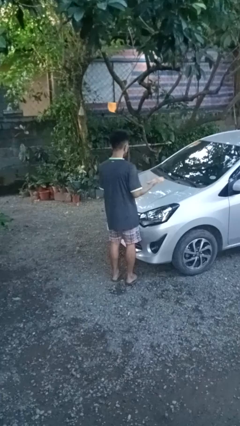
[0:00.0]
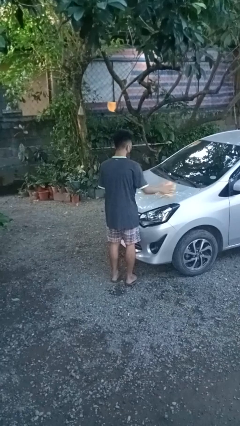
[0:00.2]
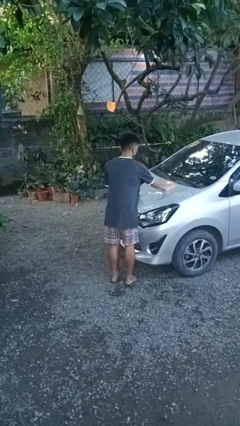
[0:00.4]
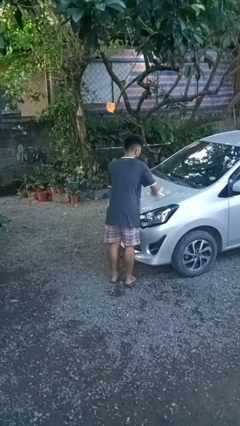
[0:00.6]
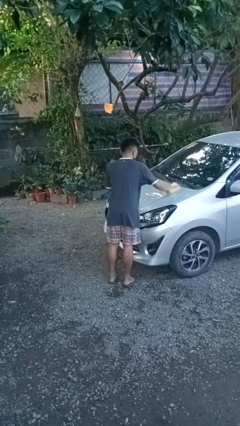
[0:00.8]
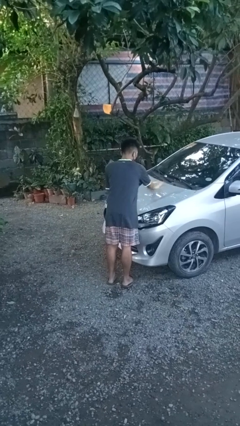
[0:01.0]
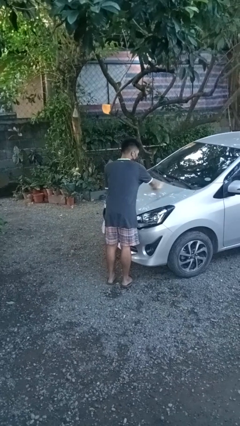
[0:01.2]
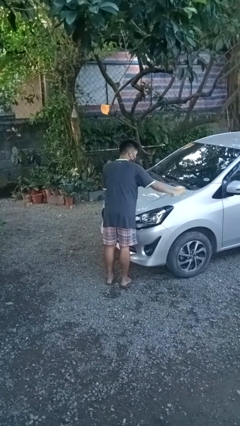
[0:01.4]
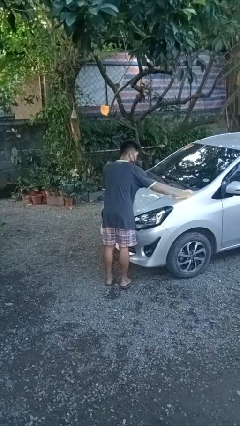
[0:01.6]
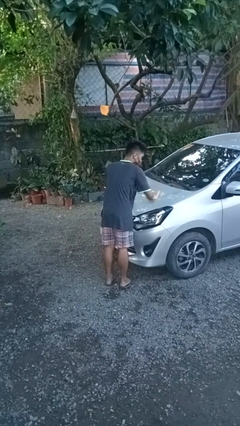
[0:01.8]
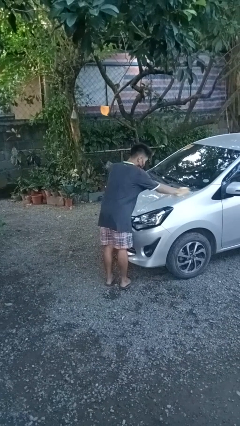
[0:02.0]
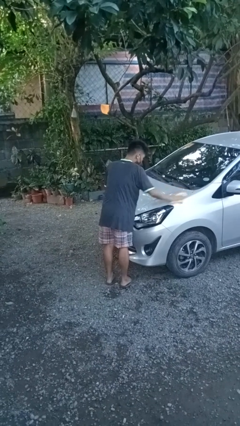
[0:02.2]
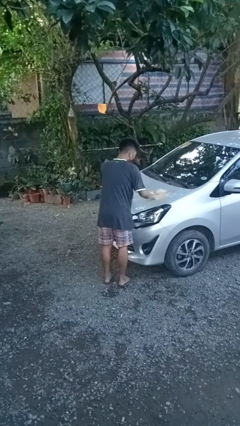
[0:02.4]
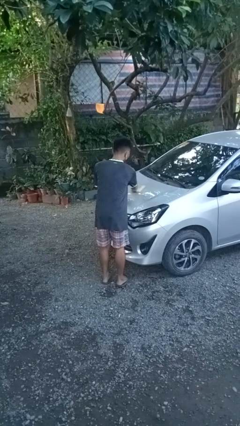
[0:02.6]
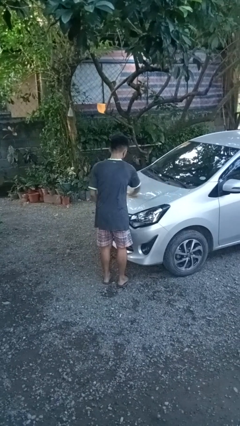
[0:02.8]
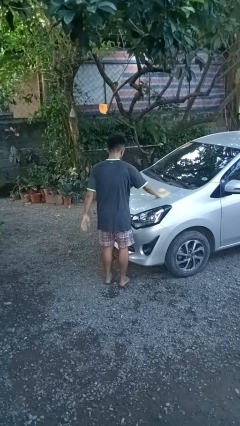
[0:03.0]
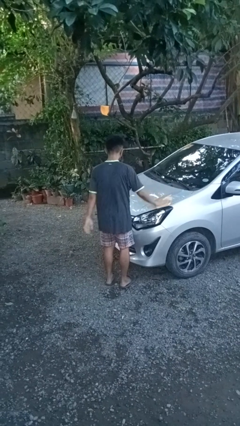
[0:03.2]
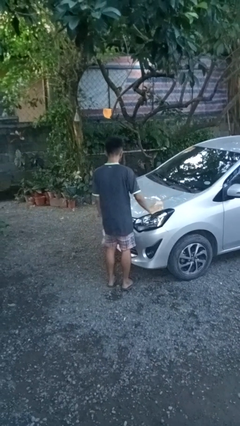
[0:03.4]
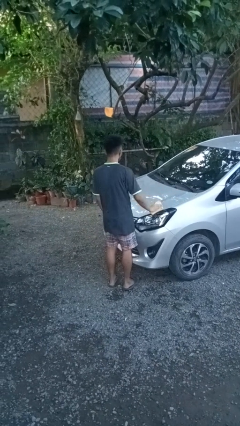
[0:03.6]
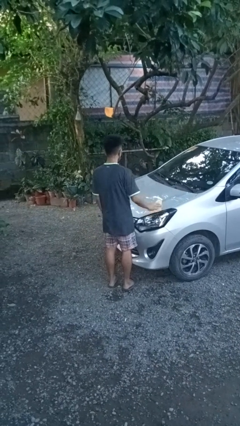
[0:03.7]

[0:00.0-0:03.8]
person polishes car with rag

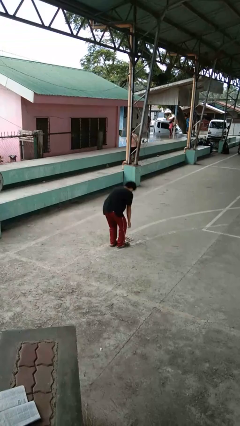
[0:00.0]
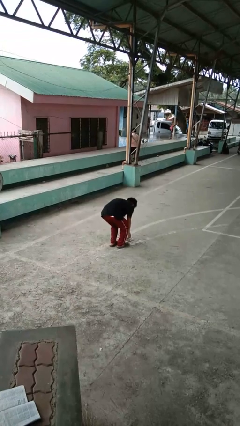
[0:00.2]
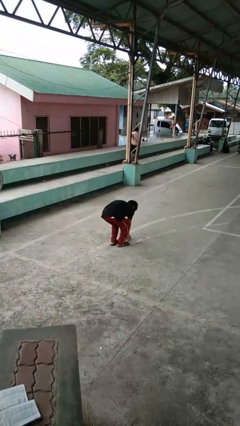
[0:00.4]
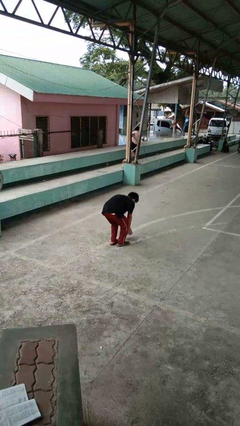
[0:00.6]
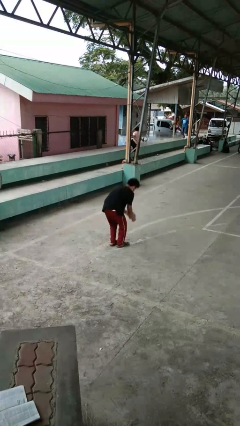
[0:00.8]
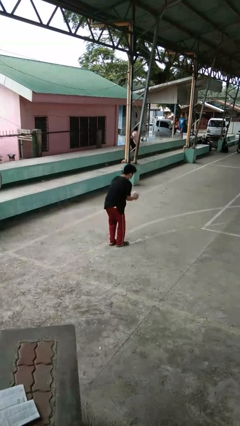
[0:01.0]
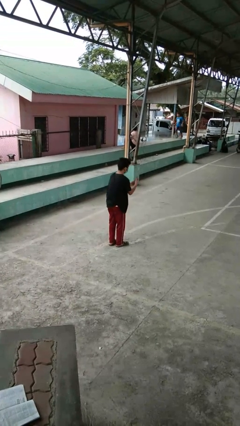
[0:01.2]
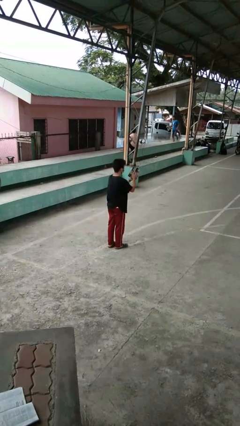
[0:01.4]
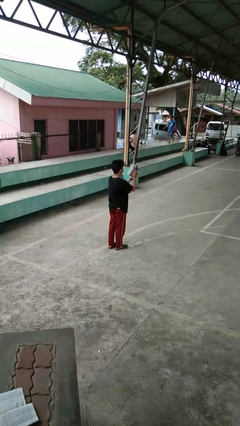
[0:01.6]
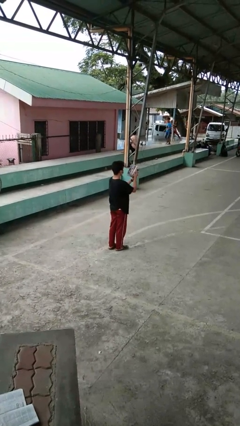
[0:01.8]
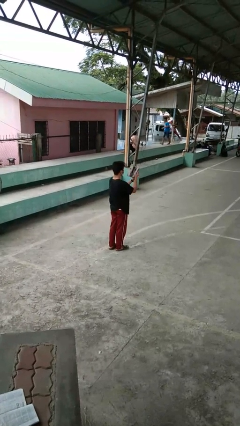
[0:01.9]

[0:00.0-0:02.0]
person picks up object from floor

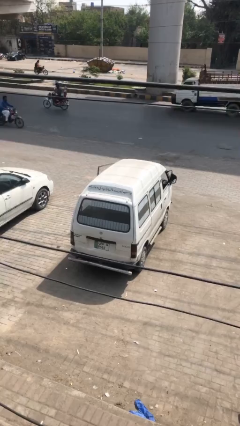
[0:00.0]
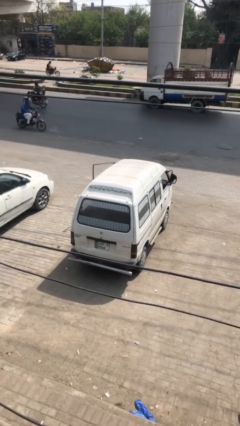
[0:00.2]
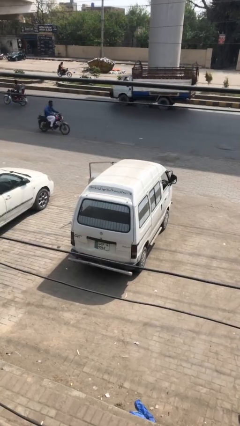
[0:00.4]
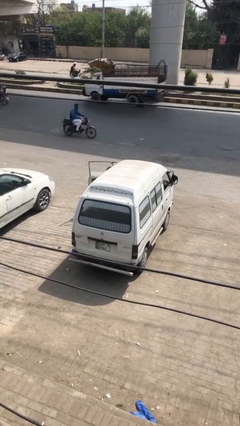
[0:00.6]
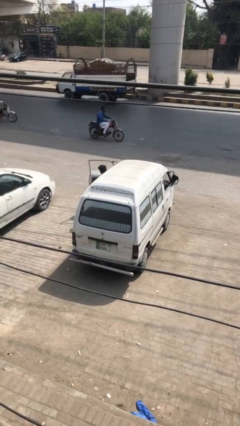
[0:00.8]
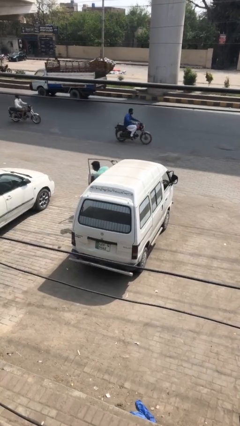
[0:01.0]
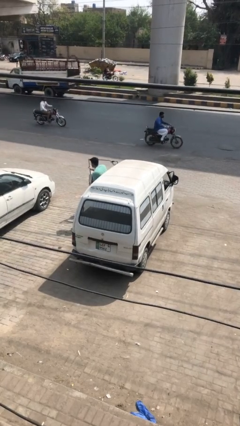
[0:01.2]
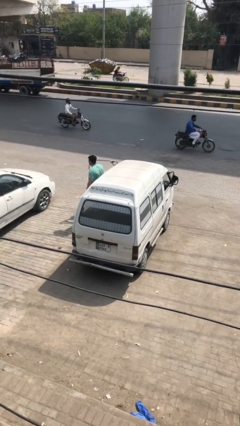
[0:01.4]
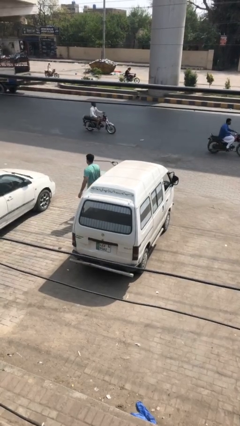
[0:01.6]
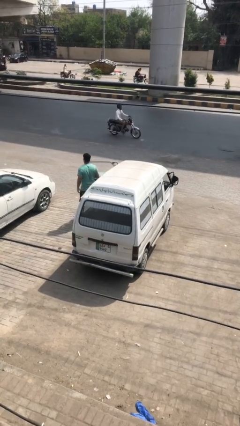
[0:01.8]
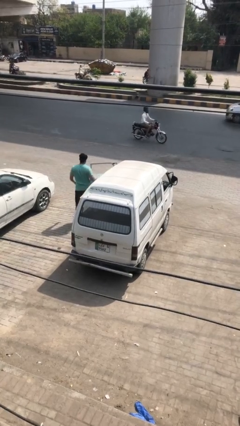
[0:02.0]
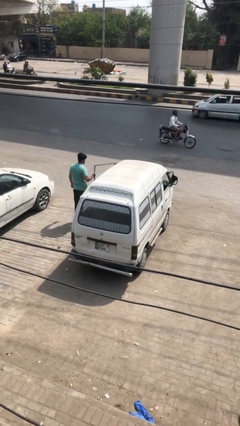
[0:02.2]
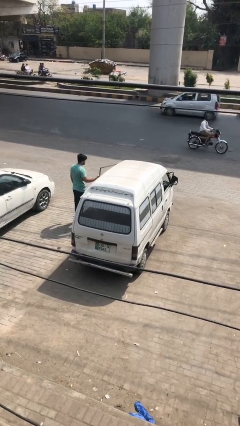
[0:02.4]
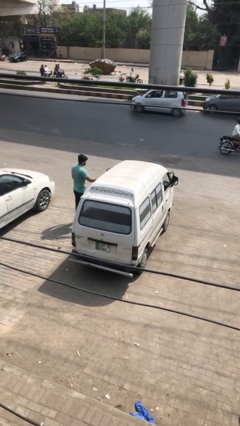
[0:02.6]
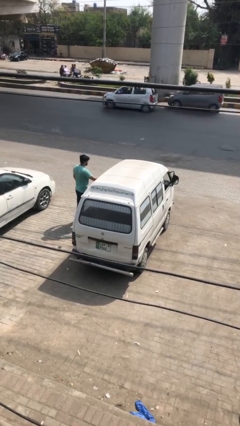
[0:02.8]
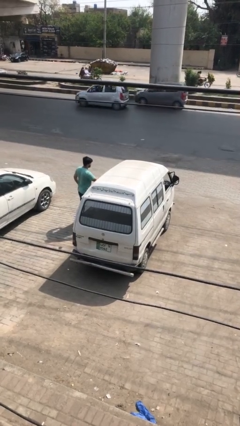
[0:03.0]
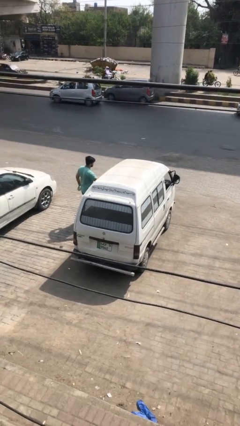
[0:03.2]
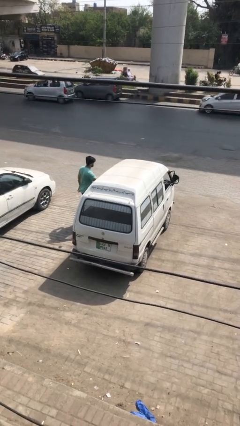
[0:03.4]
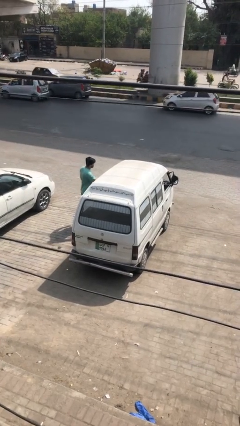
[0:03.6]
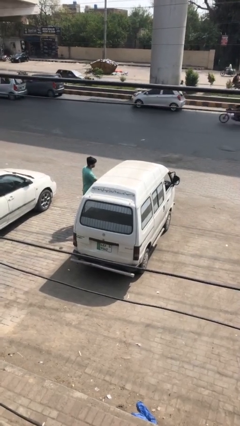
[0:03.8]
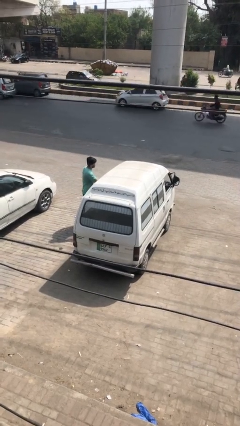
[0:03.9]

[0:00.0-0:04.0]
car drops off person

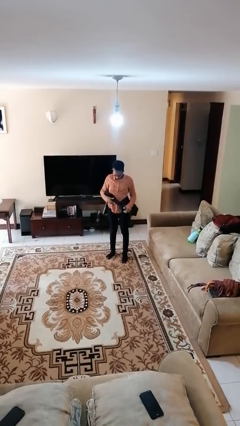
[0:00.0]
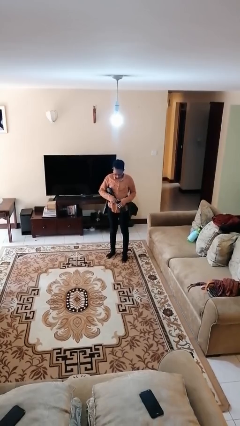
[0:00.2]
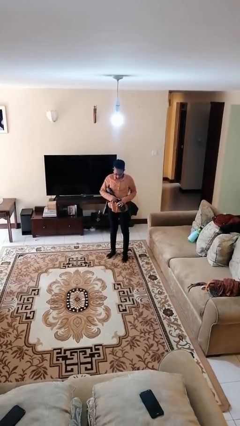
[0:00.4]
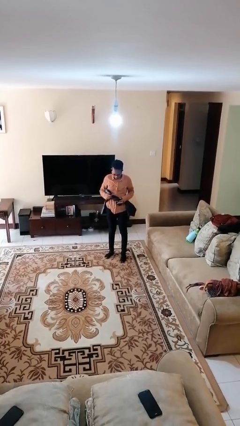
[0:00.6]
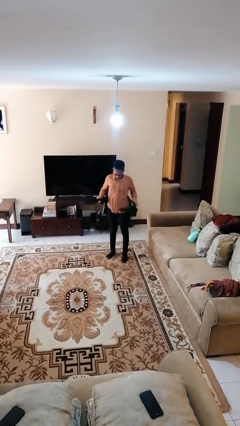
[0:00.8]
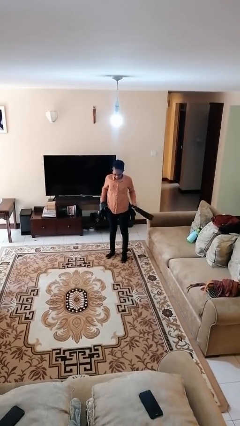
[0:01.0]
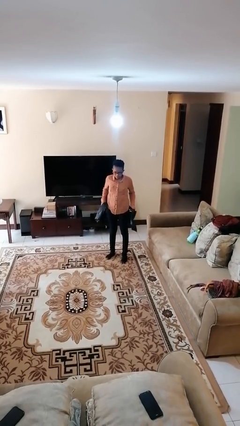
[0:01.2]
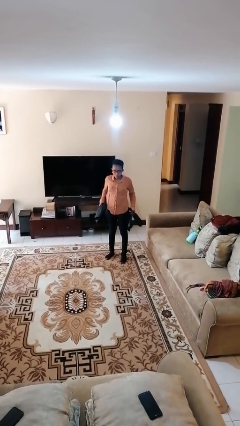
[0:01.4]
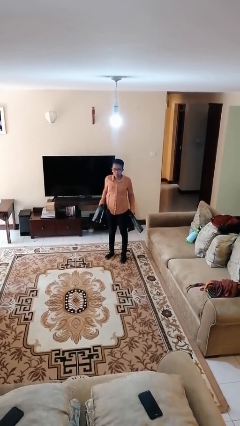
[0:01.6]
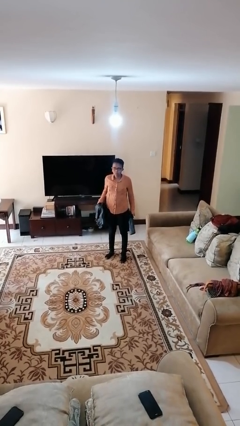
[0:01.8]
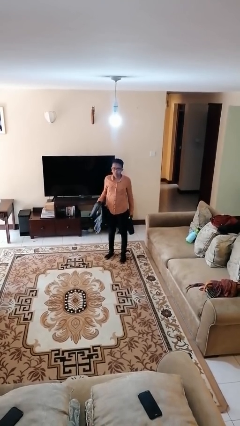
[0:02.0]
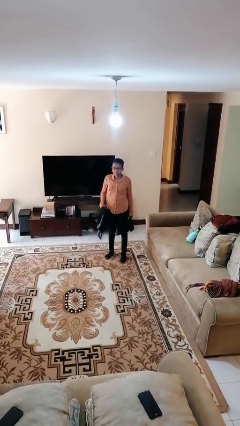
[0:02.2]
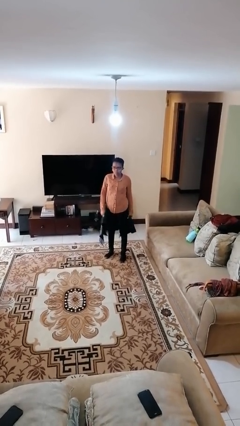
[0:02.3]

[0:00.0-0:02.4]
person unties jacket around waist

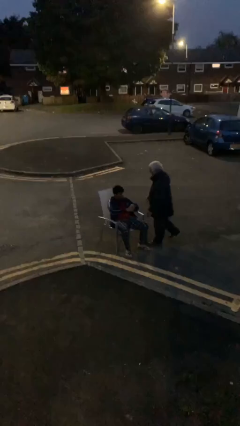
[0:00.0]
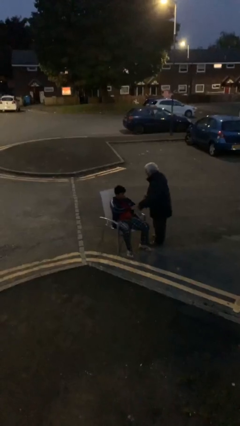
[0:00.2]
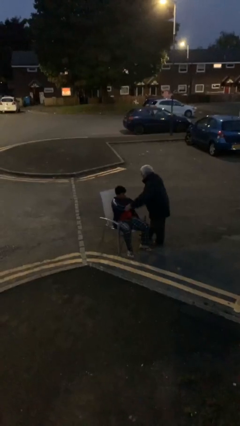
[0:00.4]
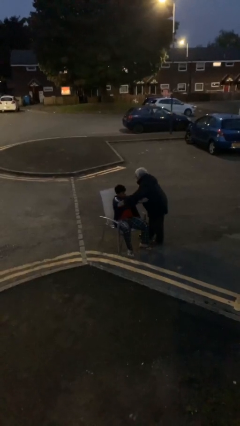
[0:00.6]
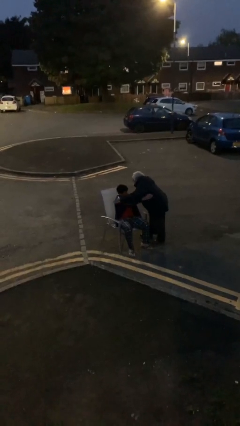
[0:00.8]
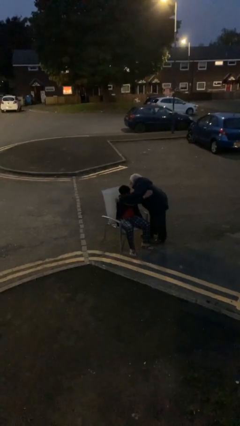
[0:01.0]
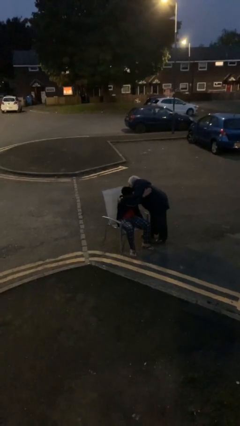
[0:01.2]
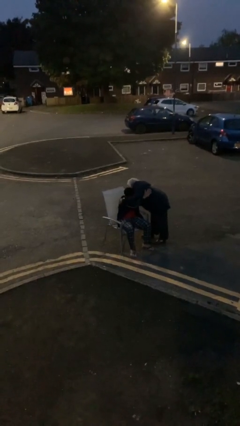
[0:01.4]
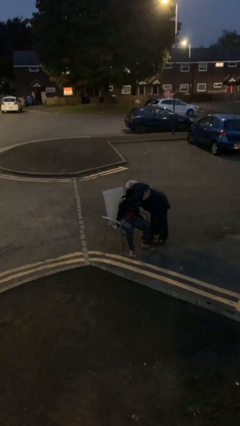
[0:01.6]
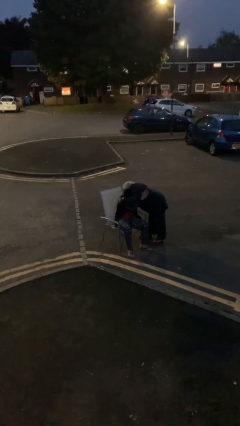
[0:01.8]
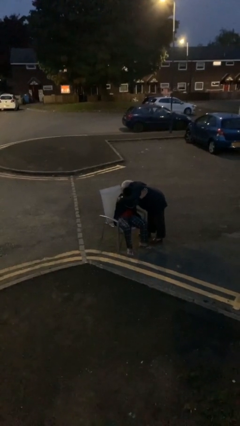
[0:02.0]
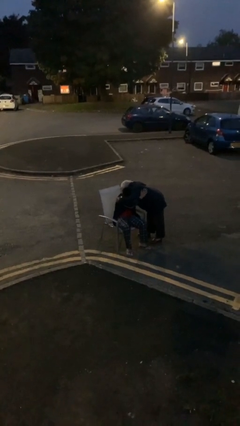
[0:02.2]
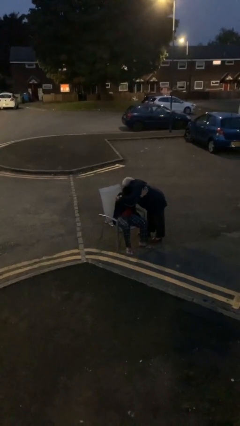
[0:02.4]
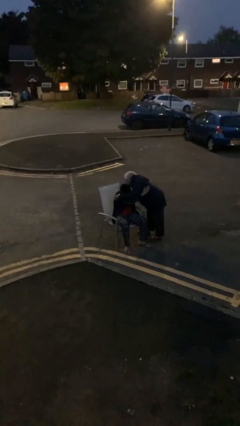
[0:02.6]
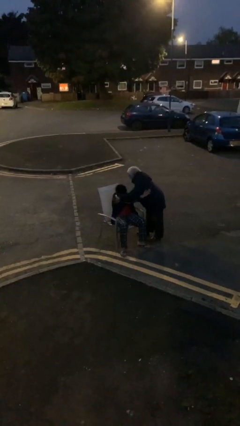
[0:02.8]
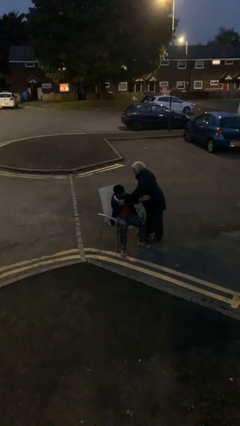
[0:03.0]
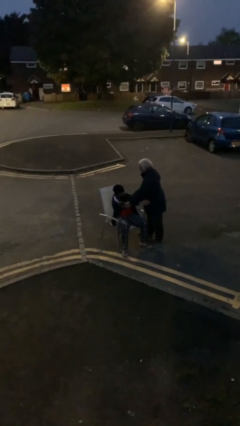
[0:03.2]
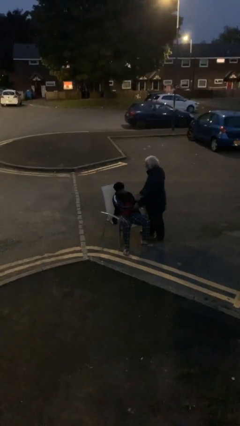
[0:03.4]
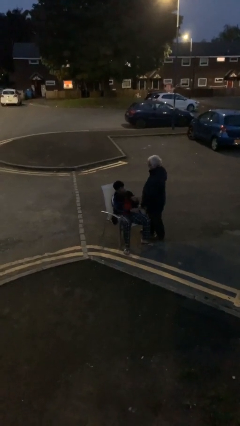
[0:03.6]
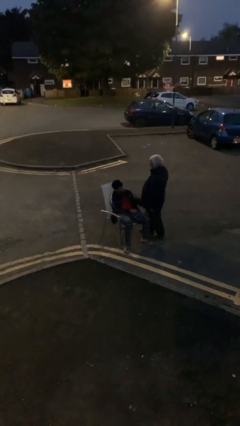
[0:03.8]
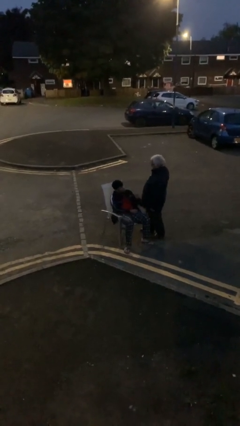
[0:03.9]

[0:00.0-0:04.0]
person embraces person

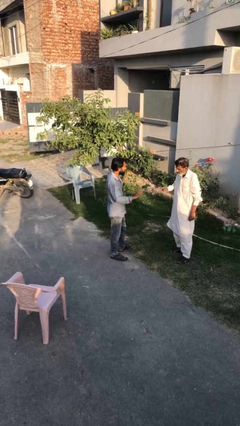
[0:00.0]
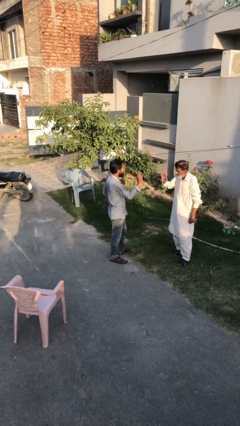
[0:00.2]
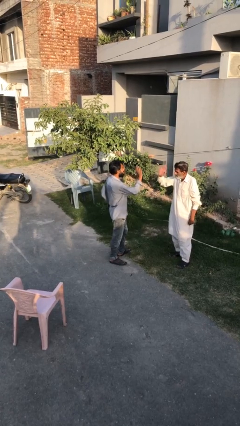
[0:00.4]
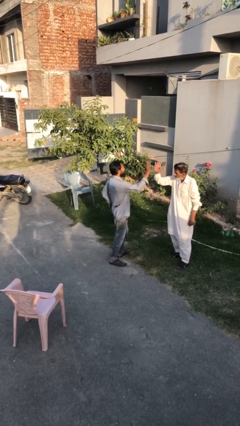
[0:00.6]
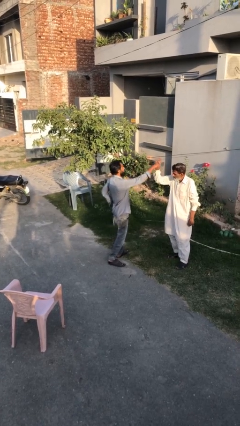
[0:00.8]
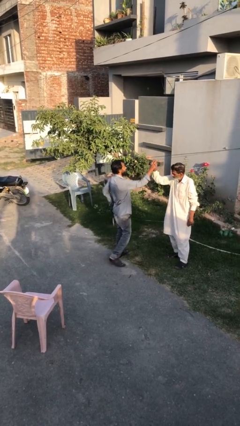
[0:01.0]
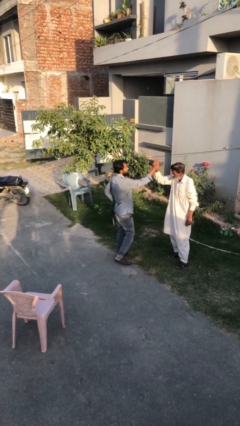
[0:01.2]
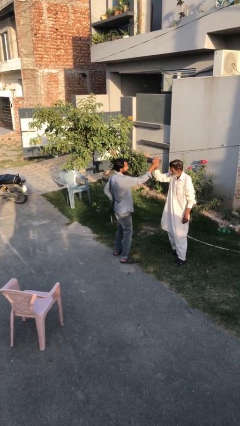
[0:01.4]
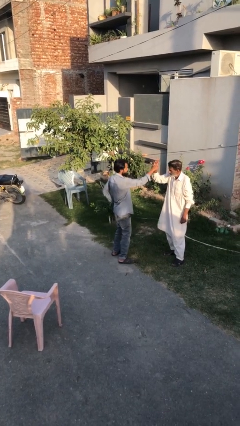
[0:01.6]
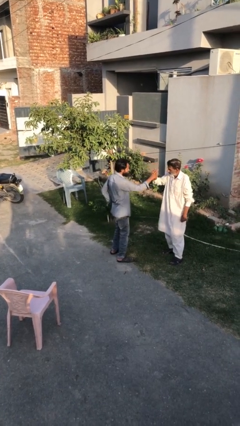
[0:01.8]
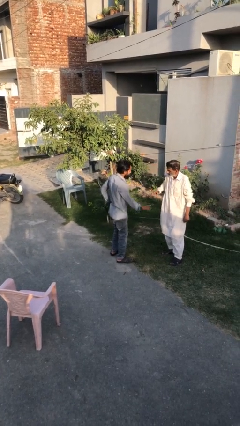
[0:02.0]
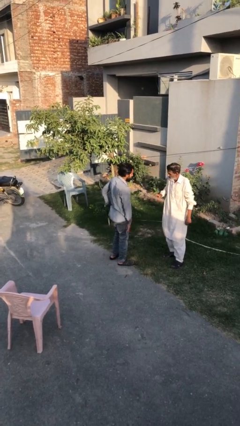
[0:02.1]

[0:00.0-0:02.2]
person highfives hand
